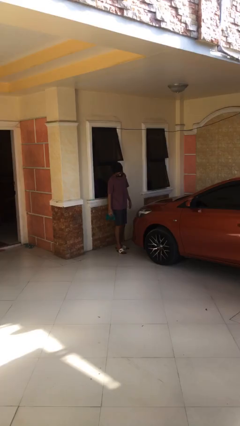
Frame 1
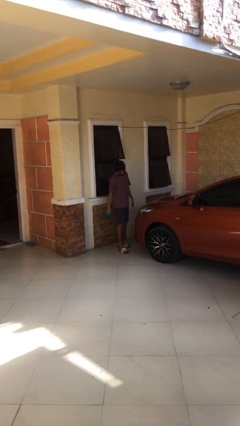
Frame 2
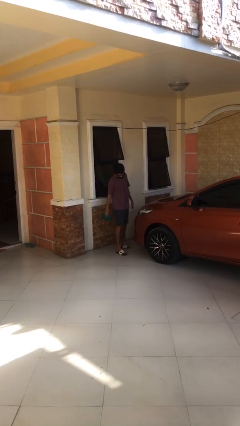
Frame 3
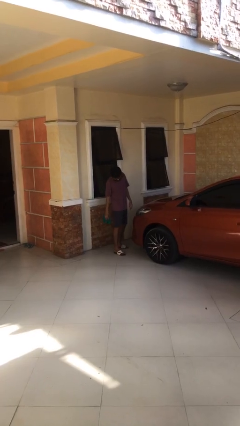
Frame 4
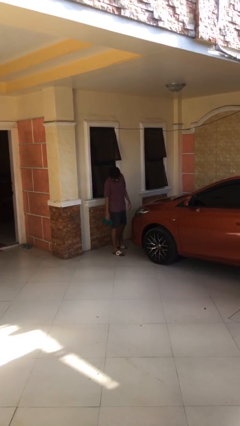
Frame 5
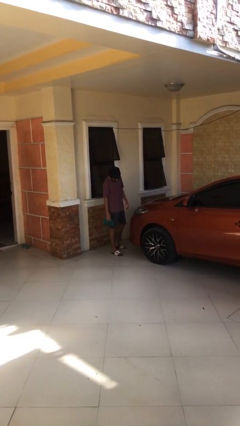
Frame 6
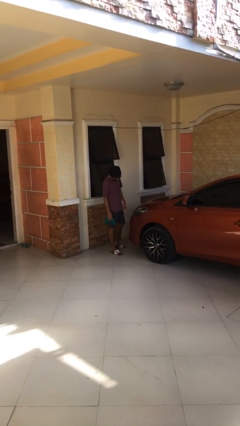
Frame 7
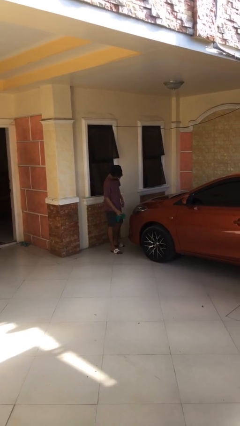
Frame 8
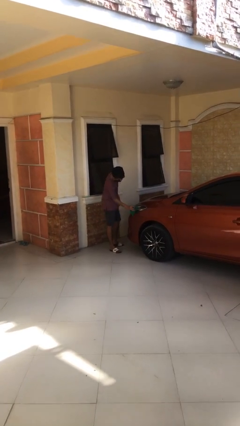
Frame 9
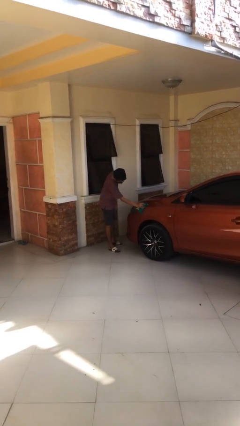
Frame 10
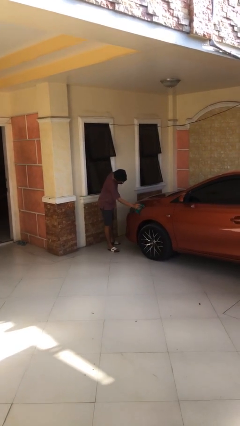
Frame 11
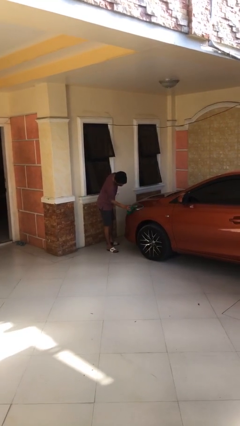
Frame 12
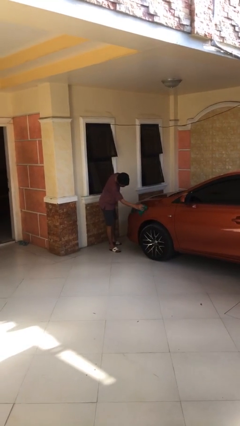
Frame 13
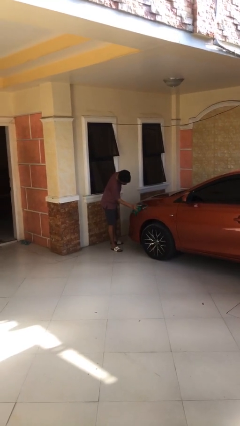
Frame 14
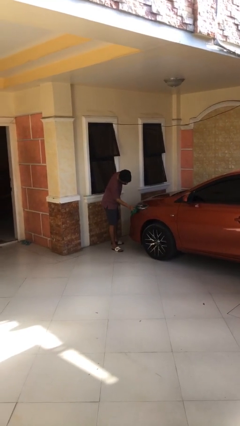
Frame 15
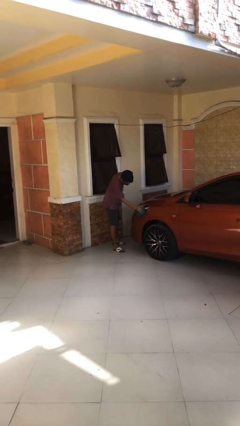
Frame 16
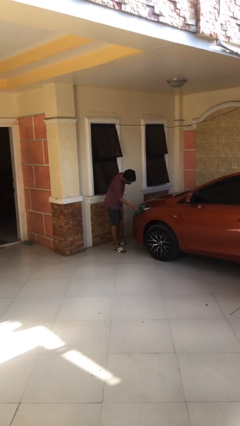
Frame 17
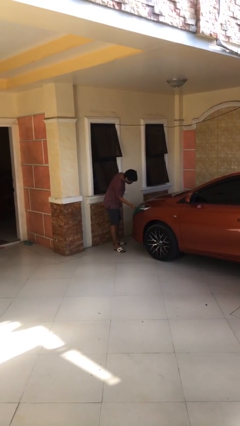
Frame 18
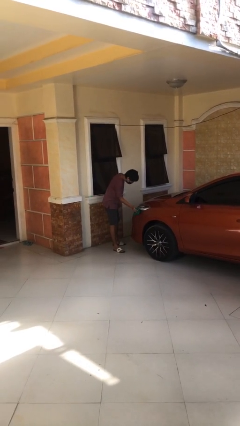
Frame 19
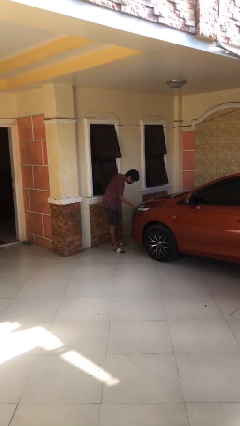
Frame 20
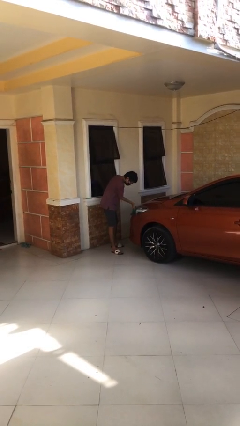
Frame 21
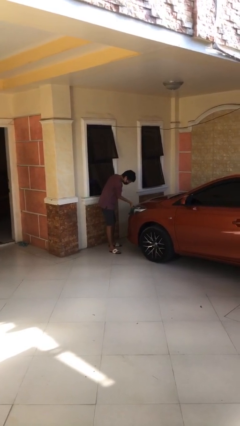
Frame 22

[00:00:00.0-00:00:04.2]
person polishes car with rag

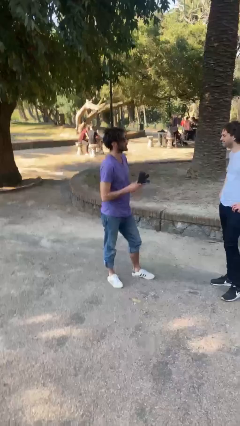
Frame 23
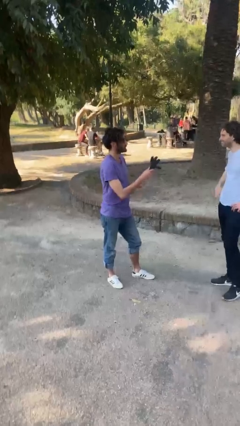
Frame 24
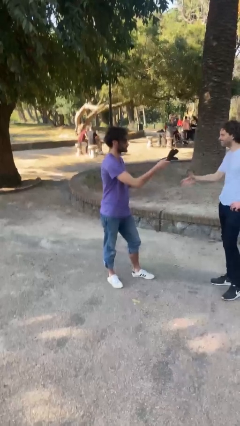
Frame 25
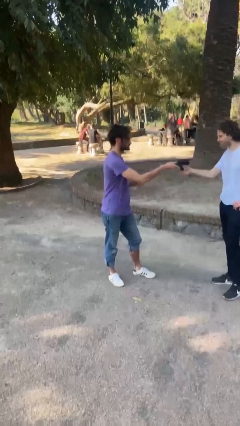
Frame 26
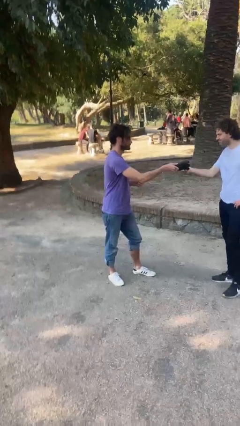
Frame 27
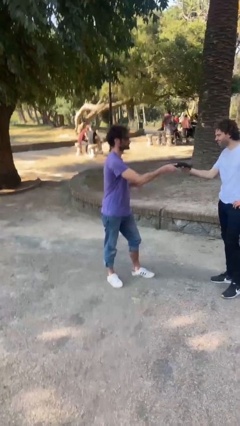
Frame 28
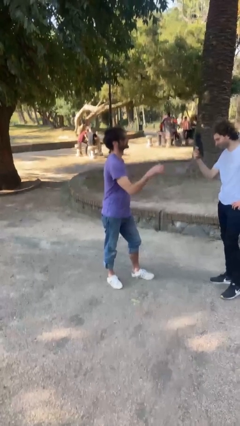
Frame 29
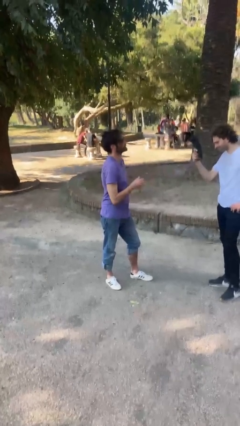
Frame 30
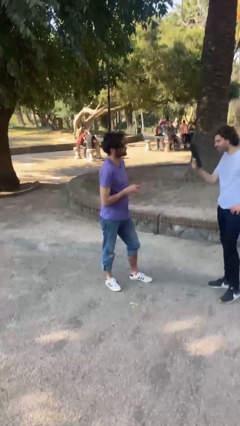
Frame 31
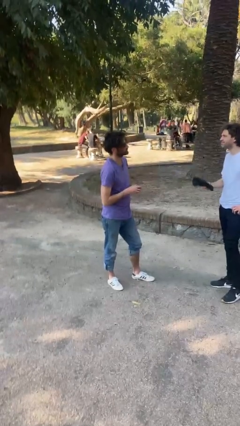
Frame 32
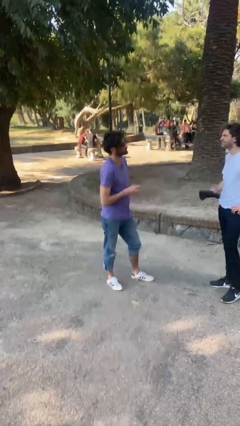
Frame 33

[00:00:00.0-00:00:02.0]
person transfers object to person

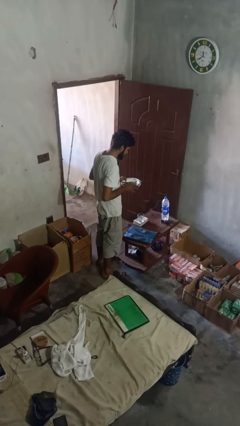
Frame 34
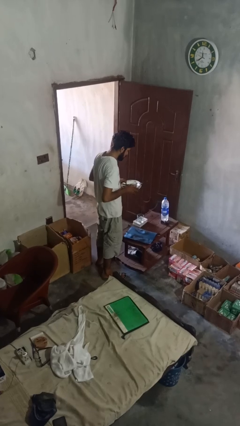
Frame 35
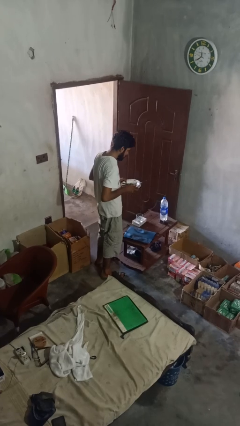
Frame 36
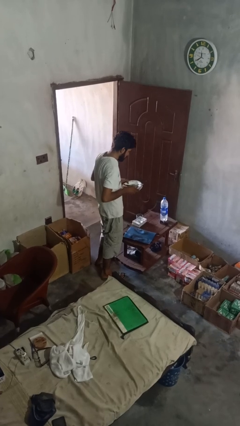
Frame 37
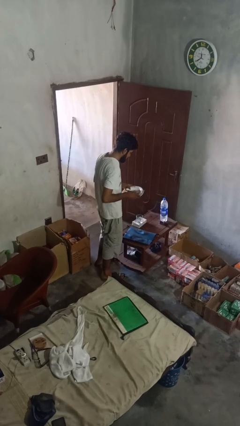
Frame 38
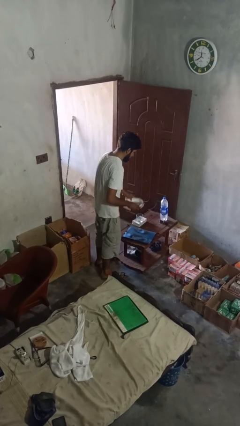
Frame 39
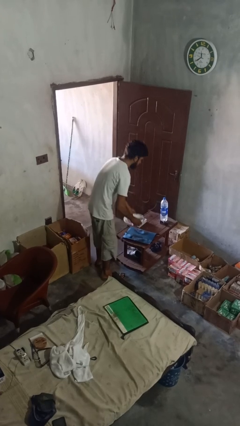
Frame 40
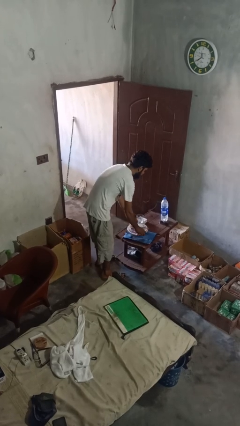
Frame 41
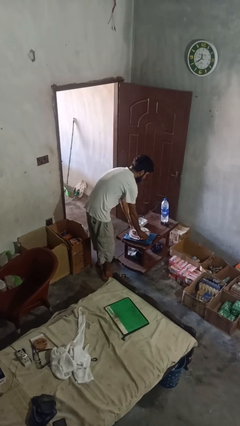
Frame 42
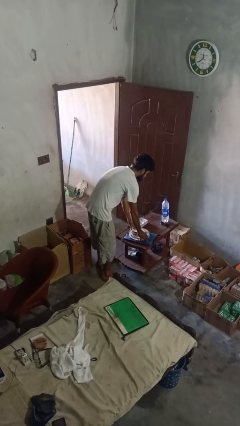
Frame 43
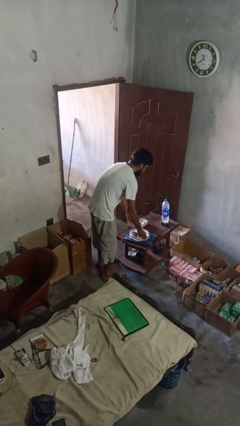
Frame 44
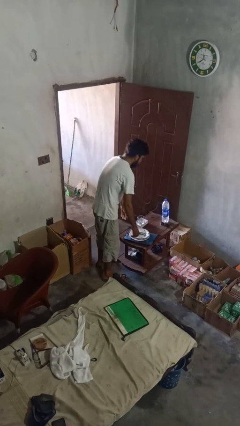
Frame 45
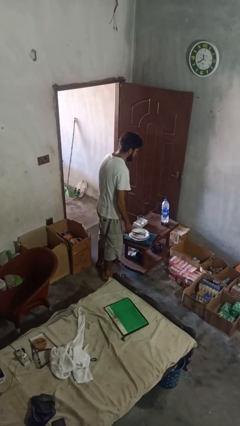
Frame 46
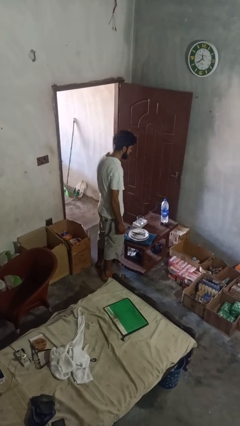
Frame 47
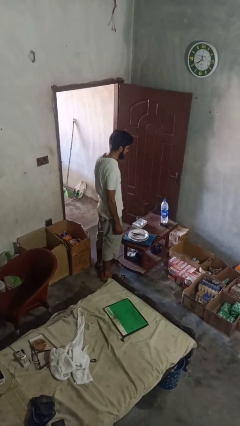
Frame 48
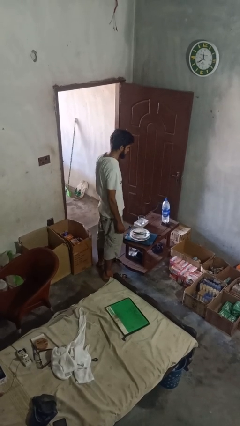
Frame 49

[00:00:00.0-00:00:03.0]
person puts down object on countertop

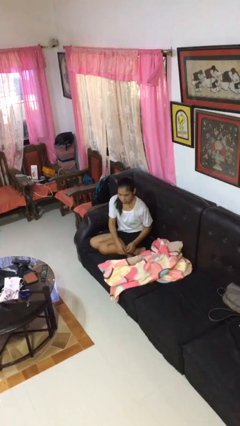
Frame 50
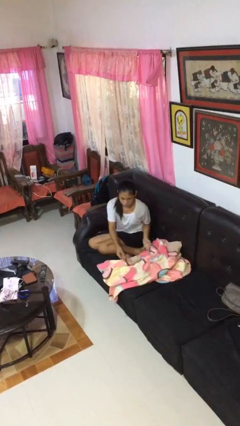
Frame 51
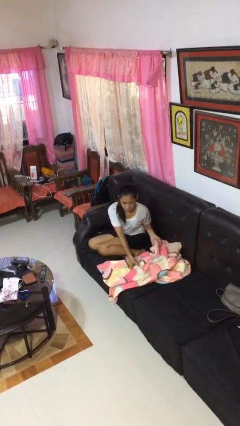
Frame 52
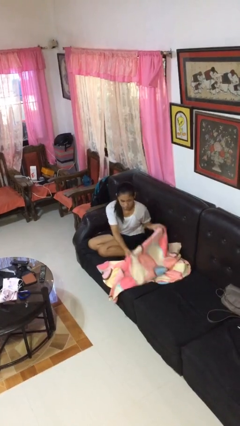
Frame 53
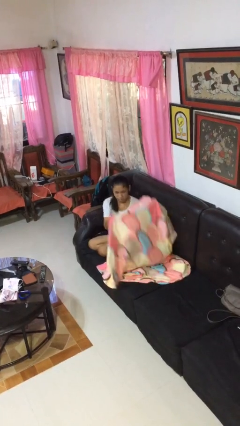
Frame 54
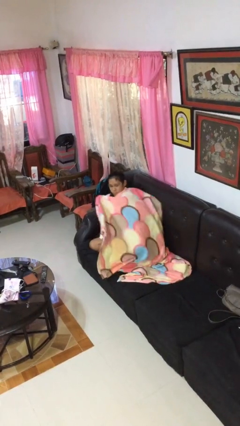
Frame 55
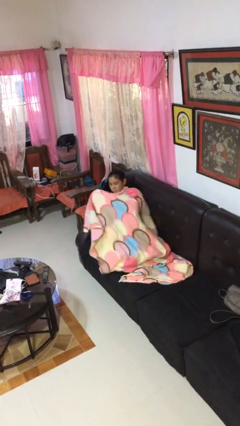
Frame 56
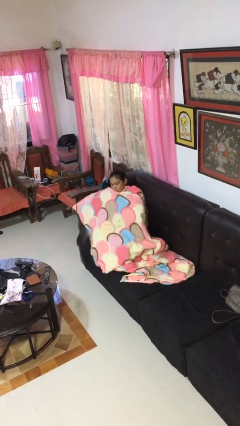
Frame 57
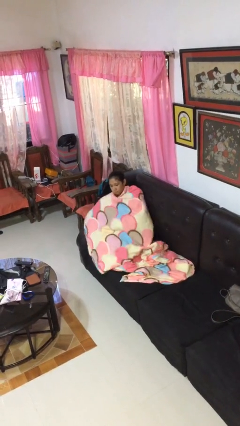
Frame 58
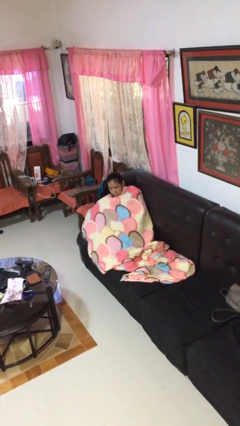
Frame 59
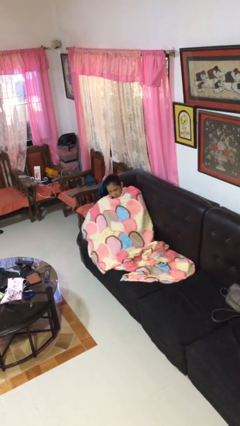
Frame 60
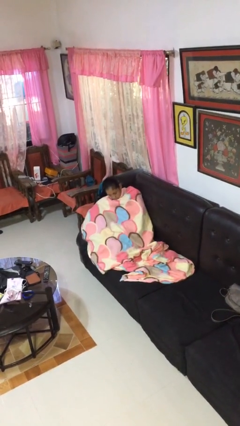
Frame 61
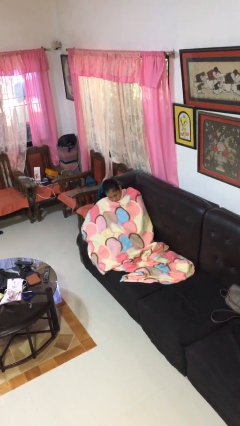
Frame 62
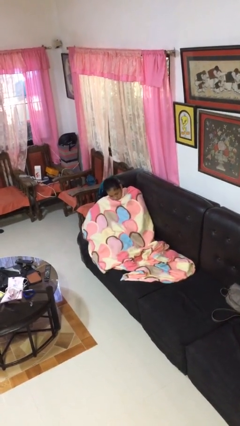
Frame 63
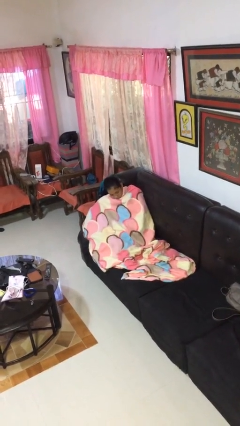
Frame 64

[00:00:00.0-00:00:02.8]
person covers with blanket

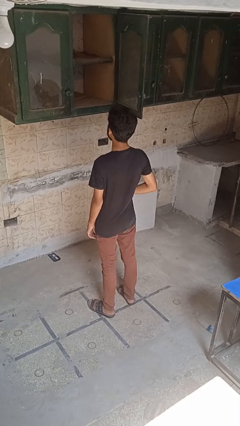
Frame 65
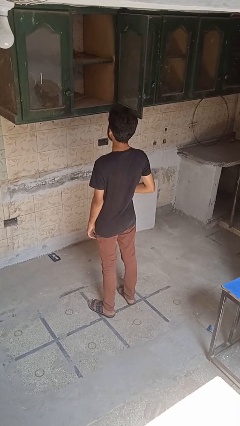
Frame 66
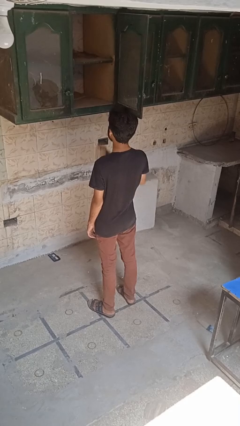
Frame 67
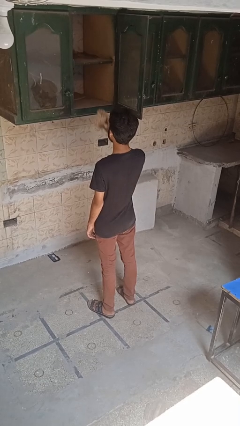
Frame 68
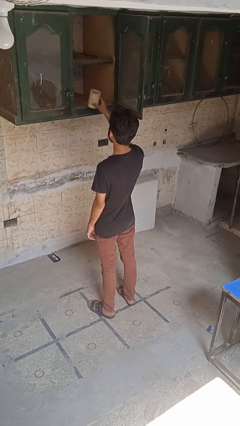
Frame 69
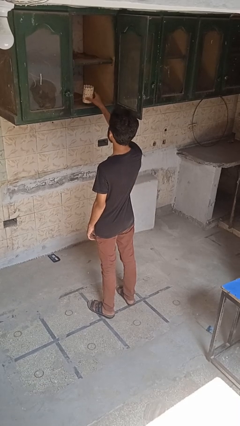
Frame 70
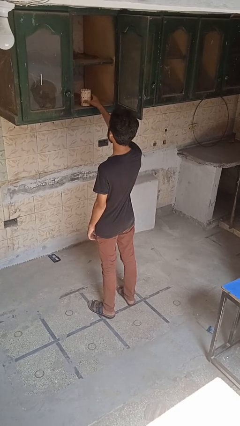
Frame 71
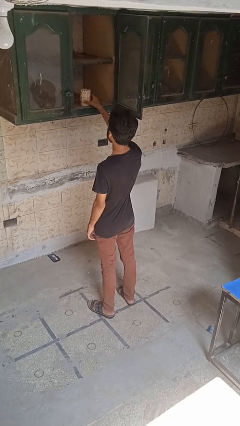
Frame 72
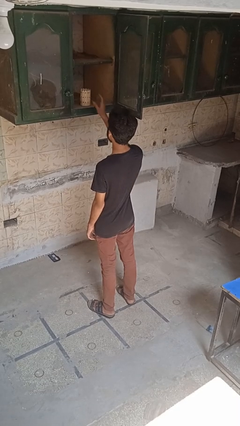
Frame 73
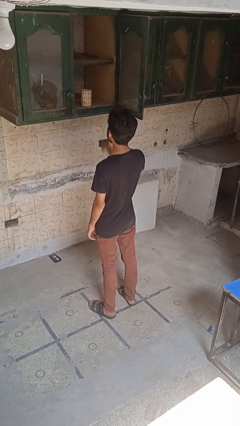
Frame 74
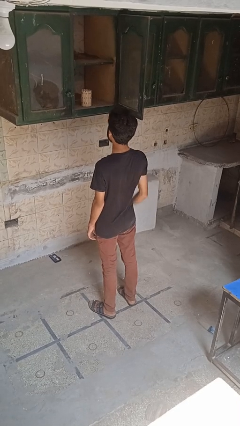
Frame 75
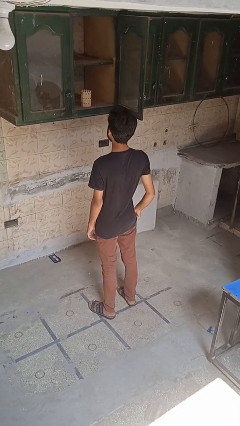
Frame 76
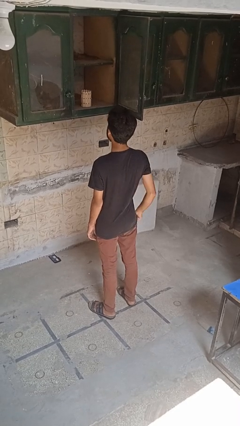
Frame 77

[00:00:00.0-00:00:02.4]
person puts down object into cabinet

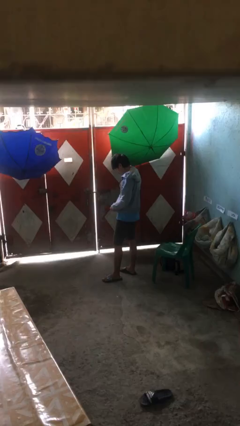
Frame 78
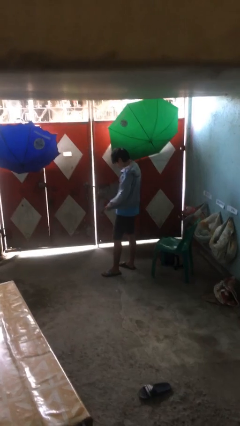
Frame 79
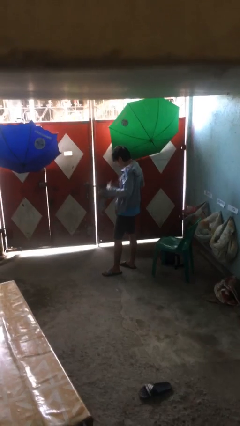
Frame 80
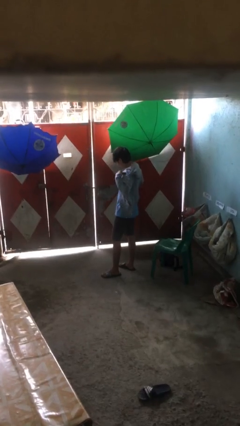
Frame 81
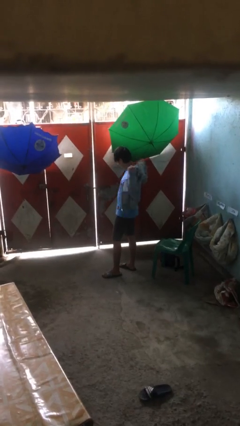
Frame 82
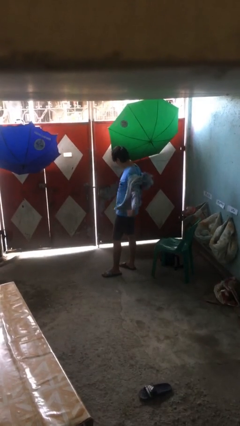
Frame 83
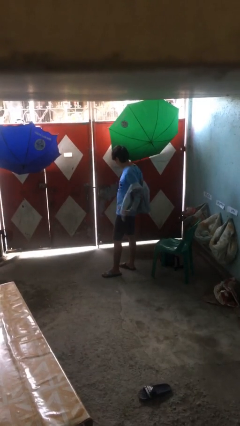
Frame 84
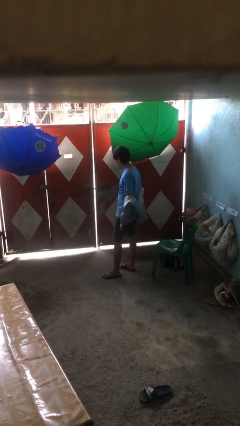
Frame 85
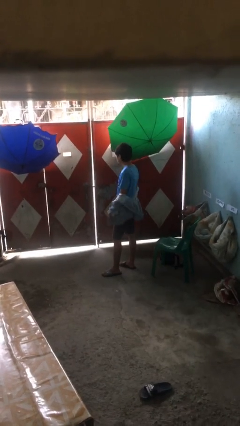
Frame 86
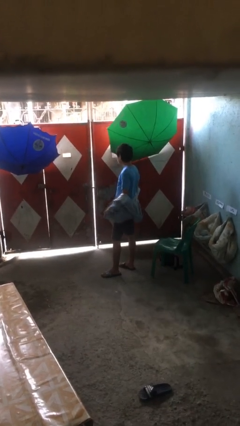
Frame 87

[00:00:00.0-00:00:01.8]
person takes off jacket

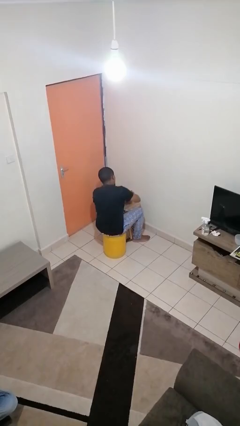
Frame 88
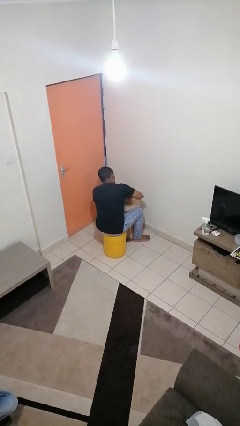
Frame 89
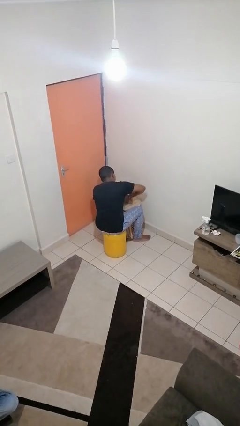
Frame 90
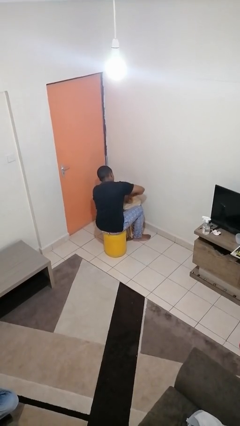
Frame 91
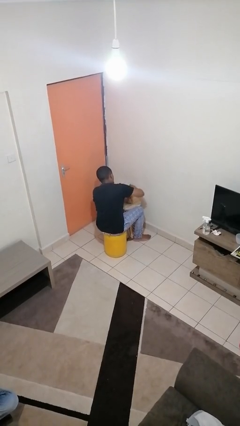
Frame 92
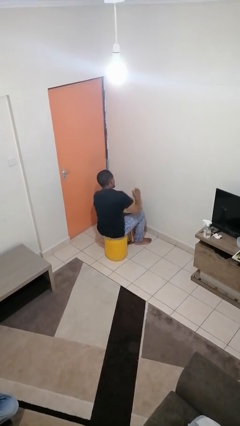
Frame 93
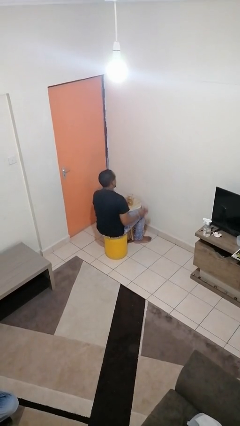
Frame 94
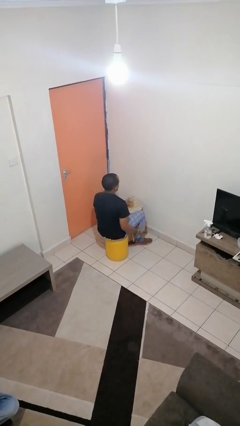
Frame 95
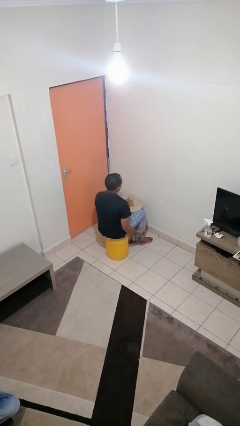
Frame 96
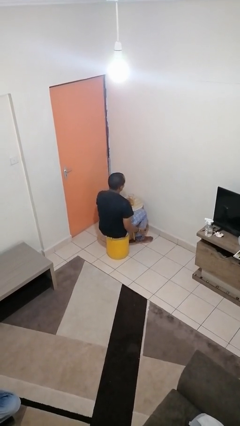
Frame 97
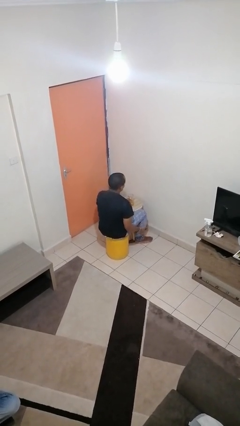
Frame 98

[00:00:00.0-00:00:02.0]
person opens jar
